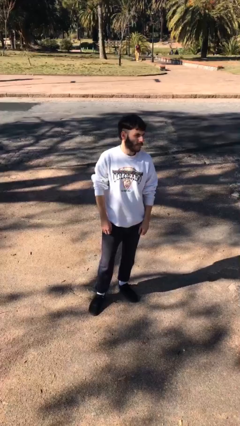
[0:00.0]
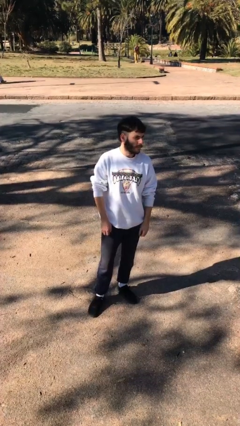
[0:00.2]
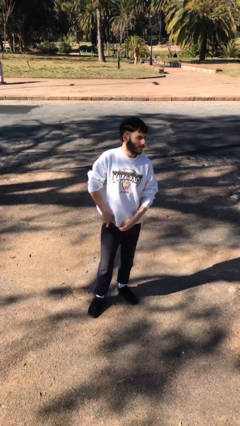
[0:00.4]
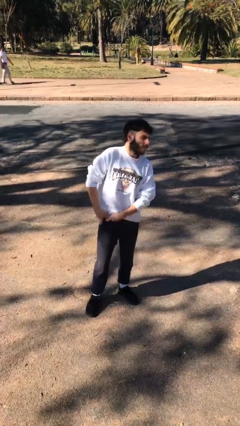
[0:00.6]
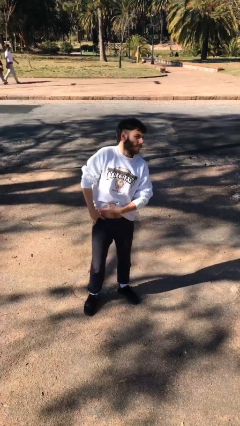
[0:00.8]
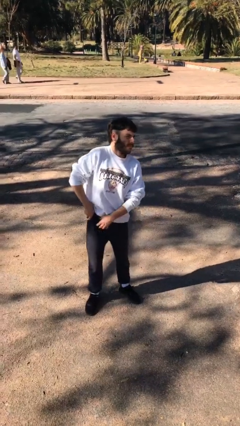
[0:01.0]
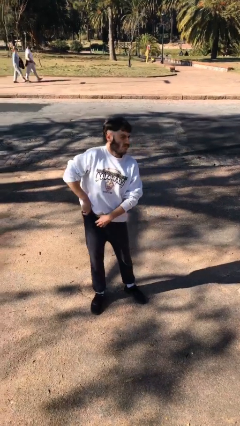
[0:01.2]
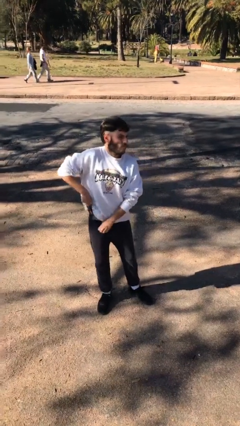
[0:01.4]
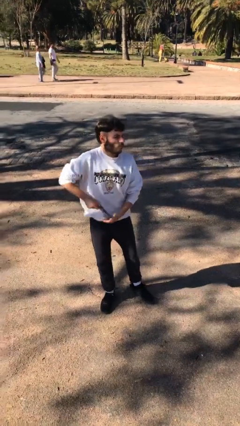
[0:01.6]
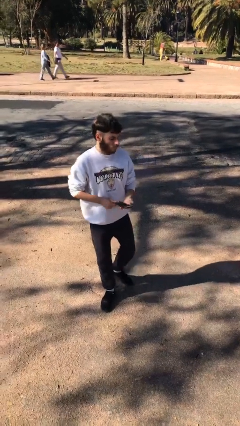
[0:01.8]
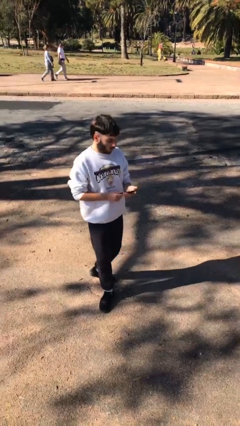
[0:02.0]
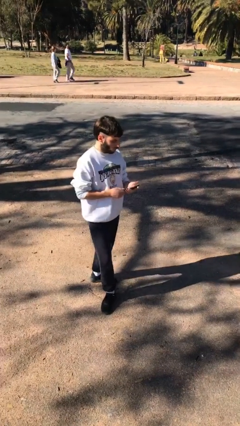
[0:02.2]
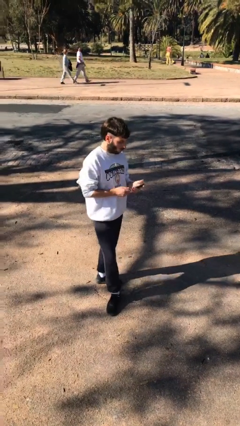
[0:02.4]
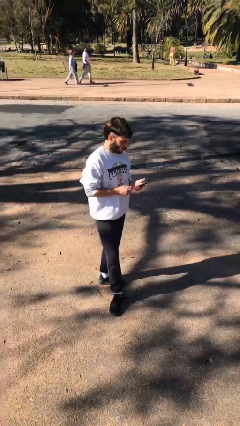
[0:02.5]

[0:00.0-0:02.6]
person takes phone from pocket

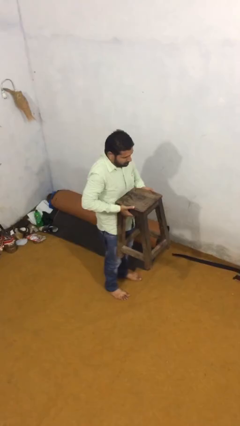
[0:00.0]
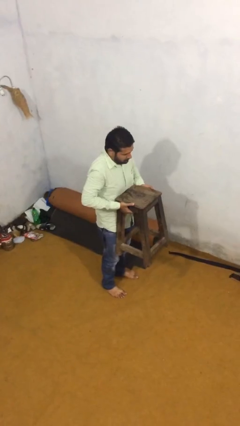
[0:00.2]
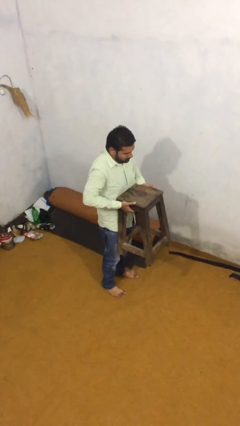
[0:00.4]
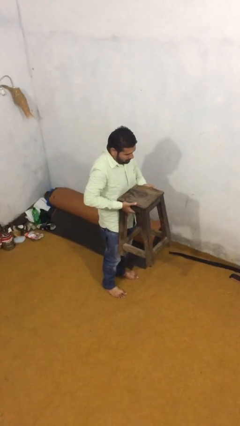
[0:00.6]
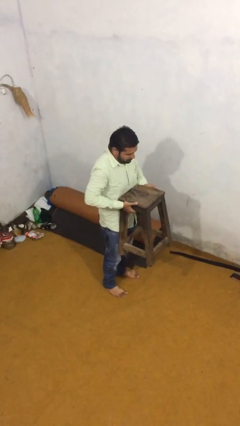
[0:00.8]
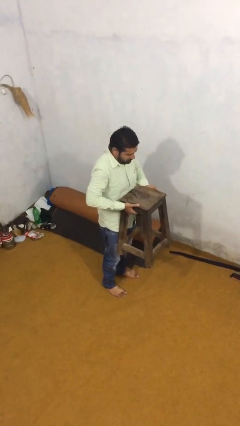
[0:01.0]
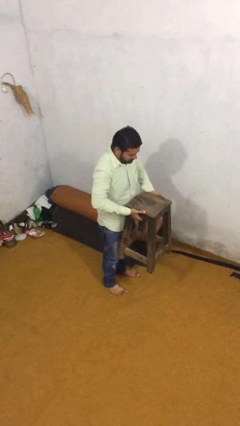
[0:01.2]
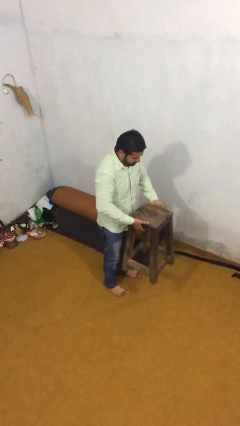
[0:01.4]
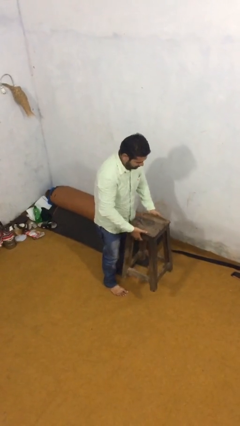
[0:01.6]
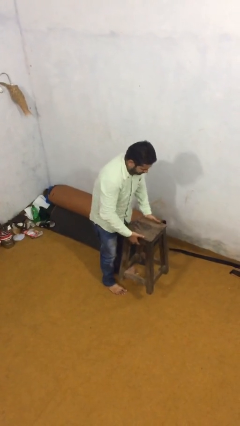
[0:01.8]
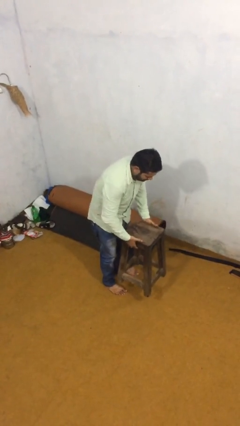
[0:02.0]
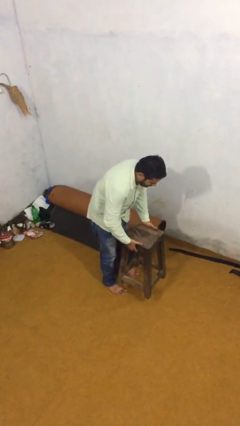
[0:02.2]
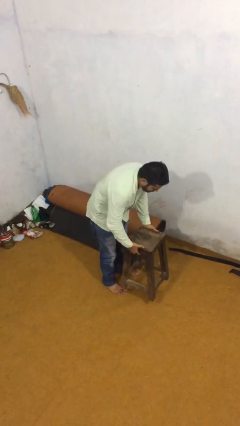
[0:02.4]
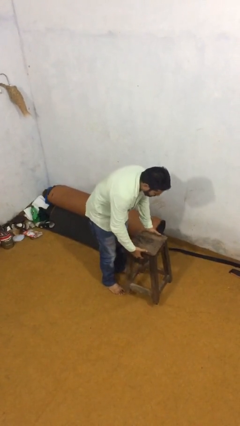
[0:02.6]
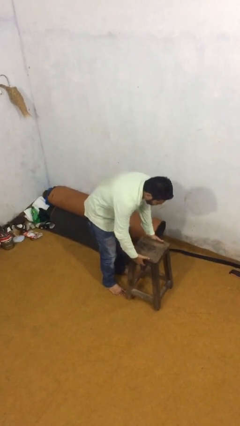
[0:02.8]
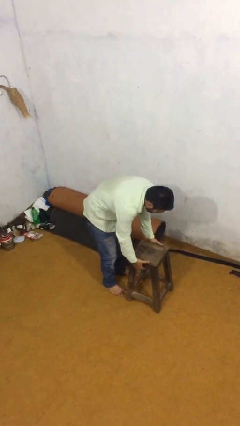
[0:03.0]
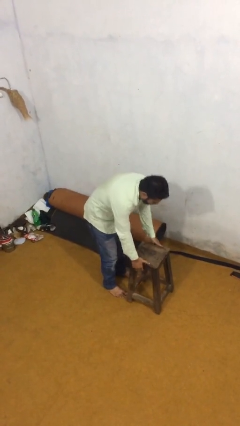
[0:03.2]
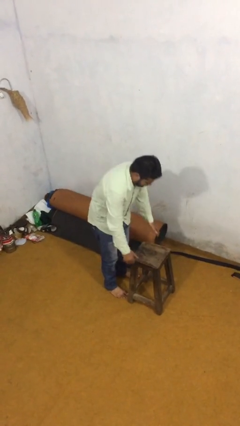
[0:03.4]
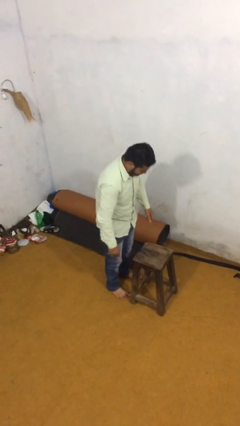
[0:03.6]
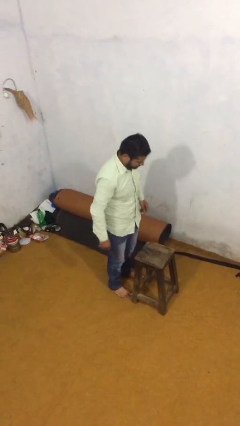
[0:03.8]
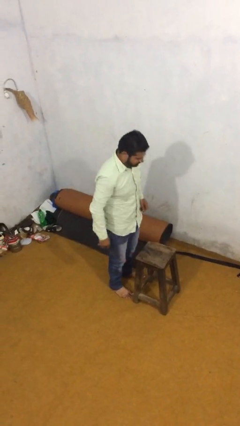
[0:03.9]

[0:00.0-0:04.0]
person puts down object on floor

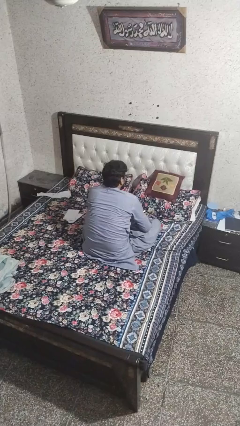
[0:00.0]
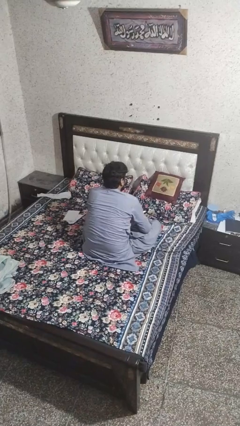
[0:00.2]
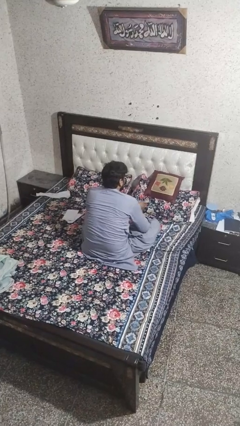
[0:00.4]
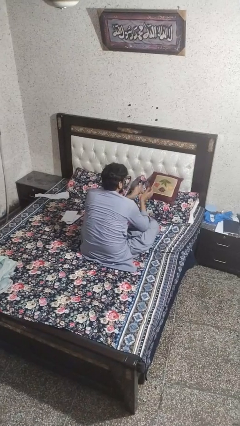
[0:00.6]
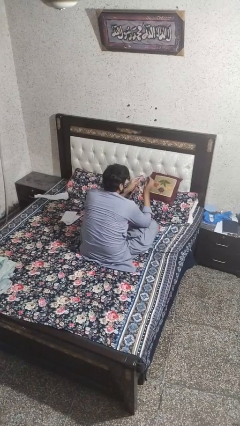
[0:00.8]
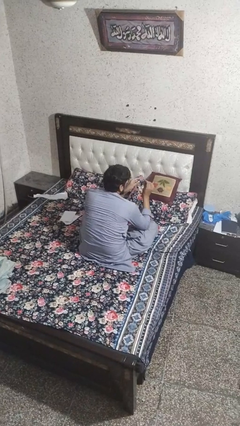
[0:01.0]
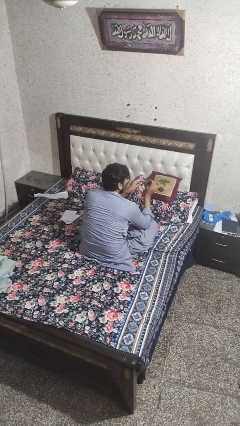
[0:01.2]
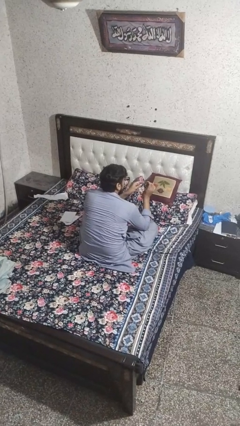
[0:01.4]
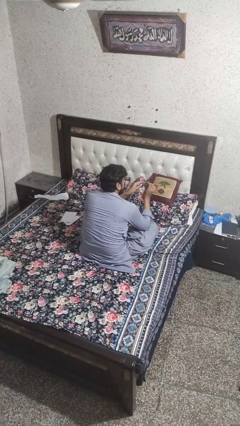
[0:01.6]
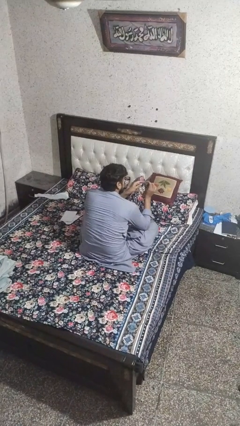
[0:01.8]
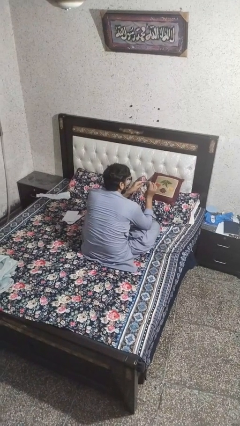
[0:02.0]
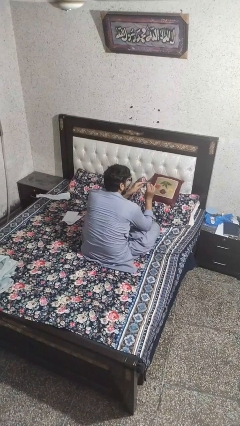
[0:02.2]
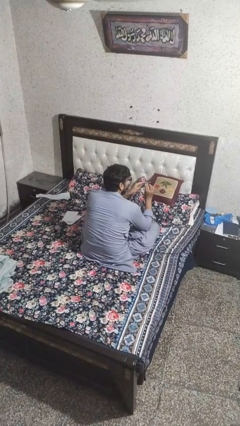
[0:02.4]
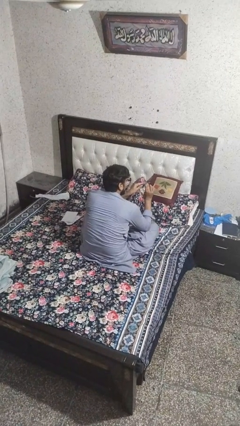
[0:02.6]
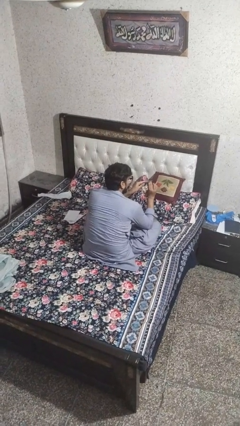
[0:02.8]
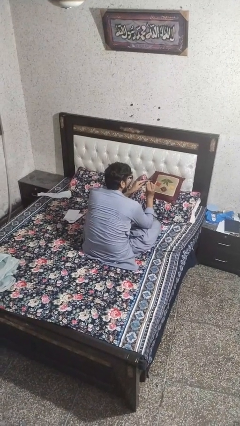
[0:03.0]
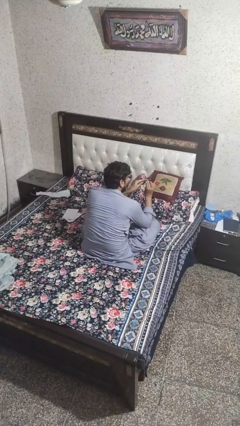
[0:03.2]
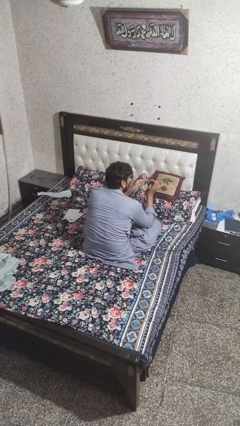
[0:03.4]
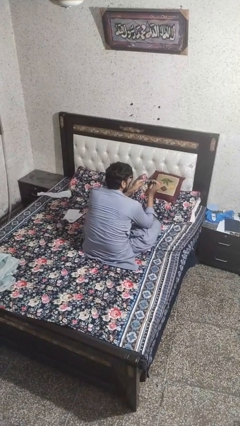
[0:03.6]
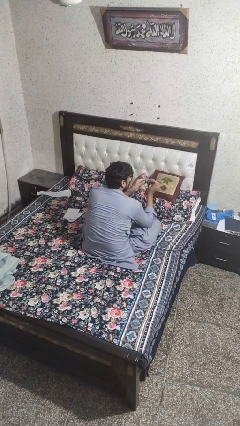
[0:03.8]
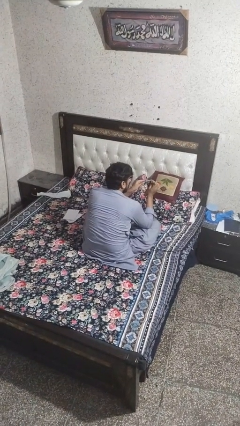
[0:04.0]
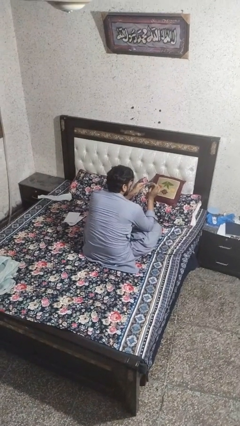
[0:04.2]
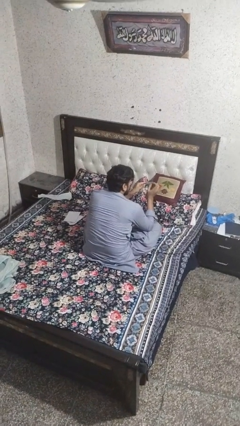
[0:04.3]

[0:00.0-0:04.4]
person files fingernails

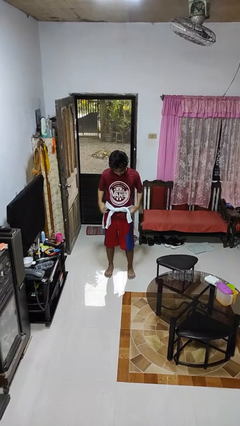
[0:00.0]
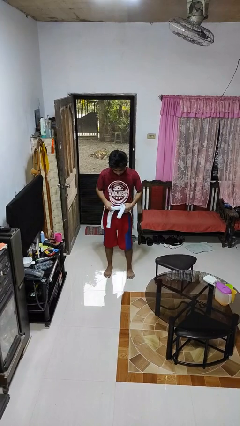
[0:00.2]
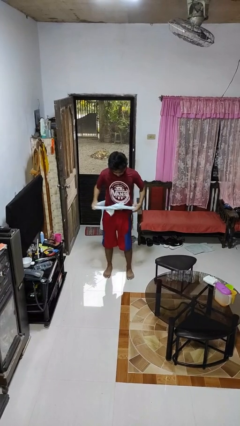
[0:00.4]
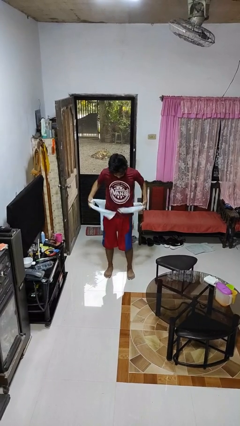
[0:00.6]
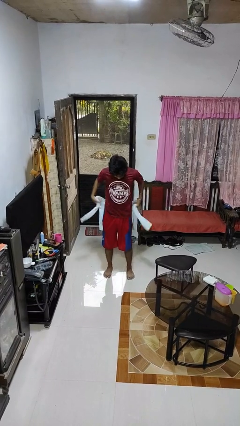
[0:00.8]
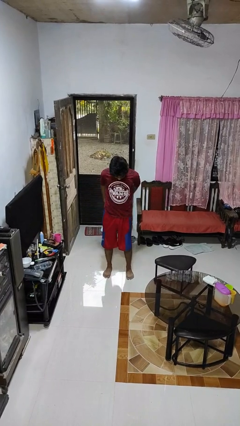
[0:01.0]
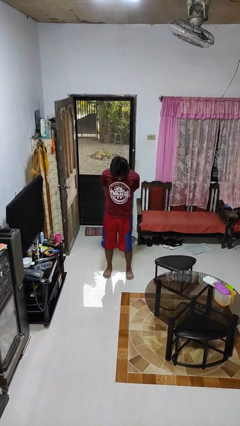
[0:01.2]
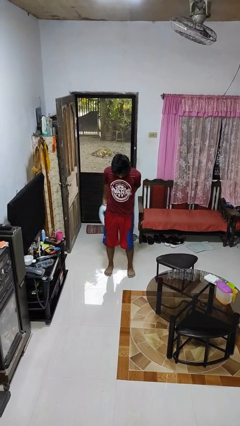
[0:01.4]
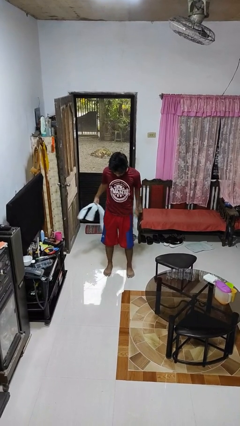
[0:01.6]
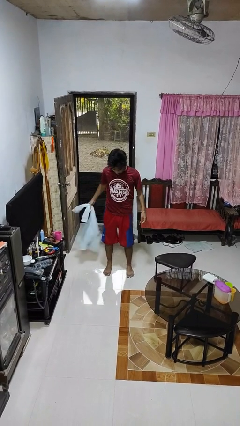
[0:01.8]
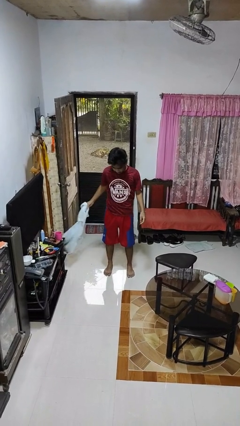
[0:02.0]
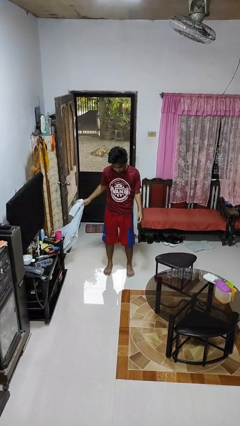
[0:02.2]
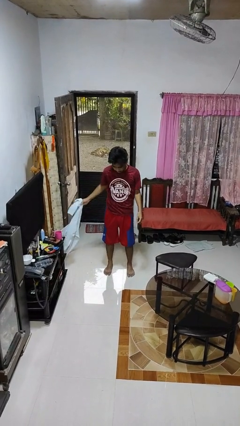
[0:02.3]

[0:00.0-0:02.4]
person unties jacket around waist

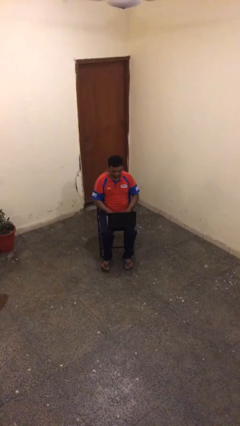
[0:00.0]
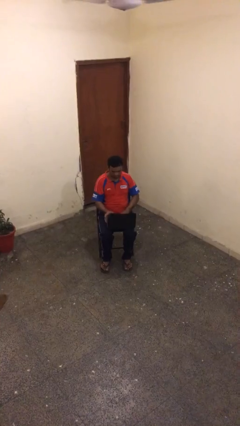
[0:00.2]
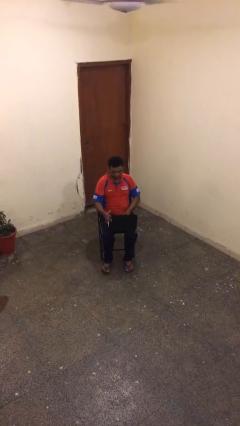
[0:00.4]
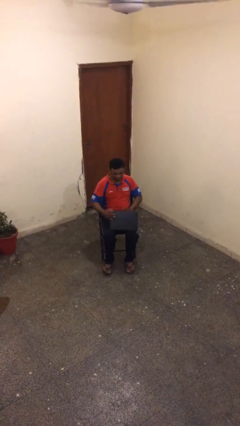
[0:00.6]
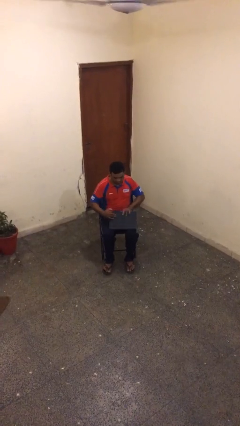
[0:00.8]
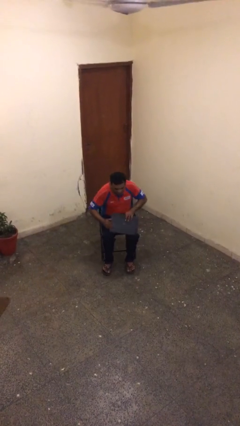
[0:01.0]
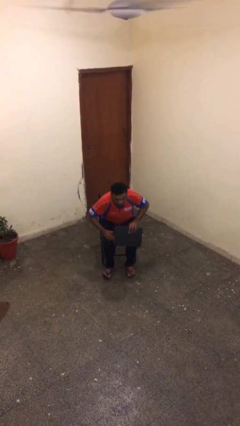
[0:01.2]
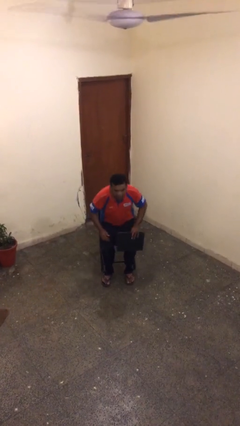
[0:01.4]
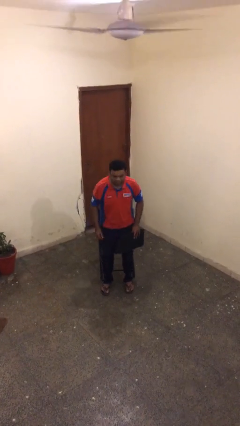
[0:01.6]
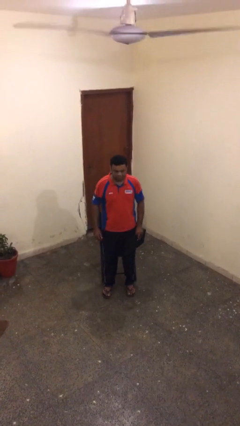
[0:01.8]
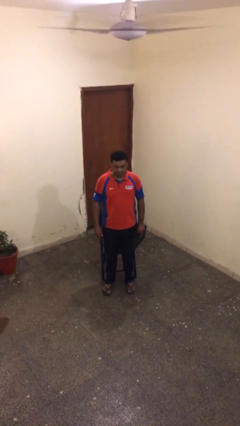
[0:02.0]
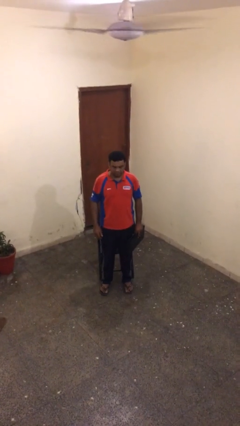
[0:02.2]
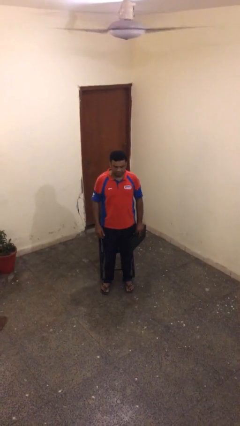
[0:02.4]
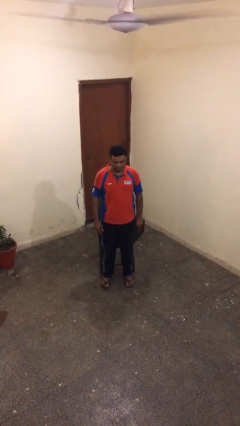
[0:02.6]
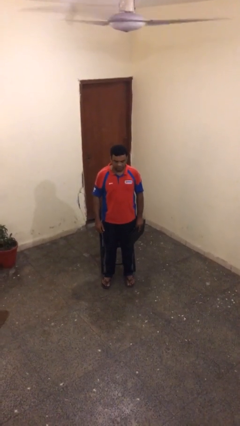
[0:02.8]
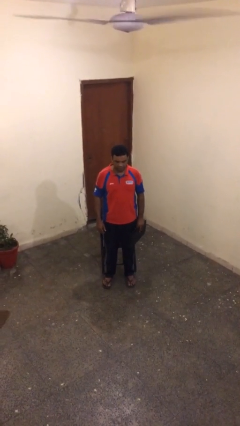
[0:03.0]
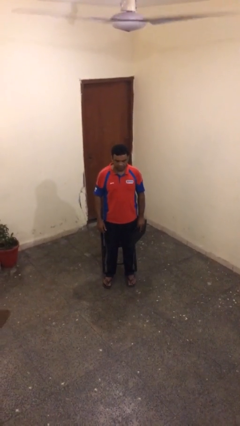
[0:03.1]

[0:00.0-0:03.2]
person stands up

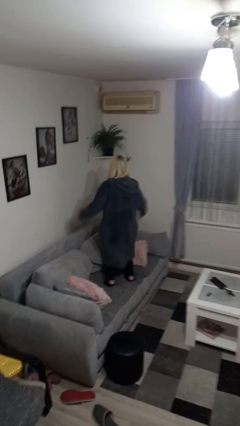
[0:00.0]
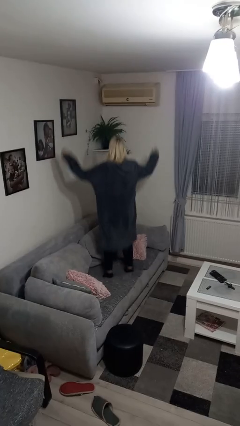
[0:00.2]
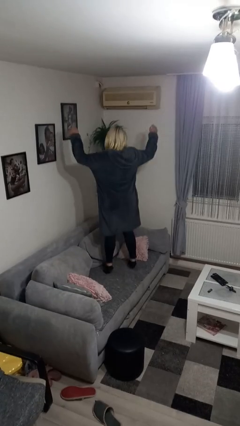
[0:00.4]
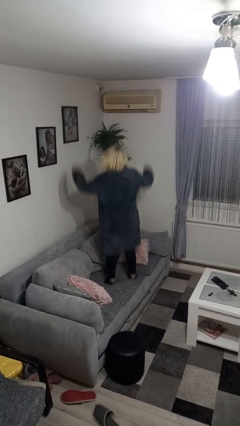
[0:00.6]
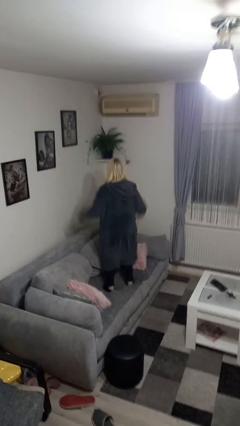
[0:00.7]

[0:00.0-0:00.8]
person jumps on couch
